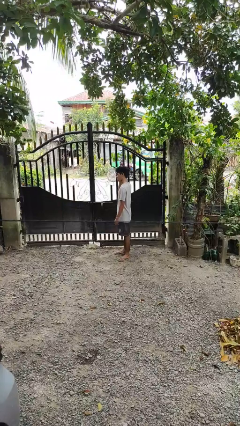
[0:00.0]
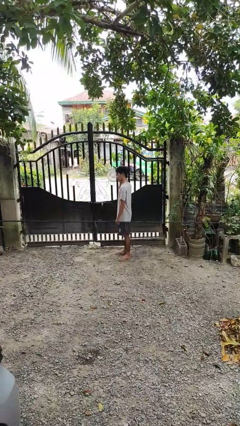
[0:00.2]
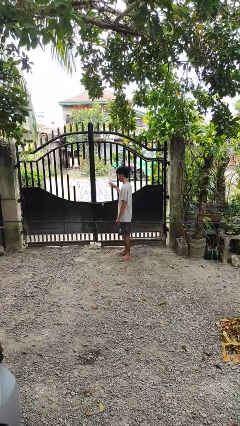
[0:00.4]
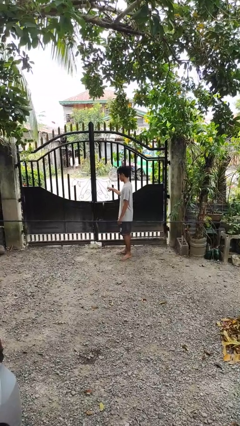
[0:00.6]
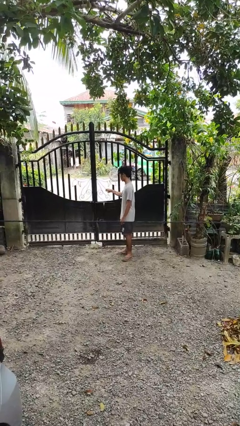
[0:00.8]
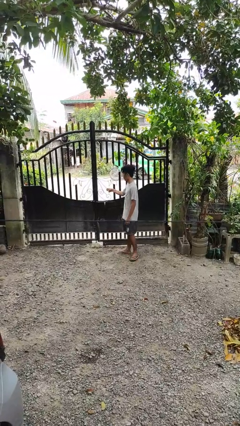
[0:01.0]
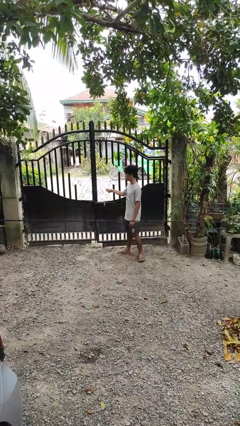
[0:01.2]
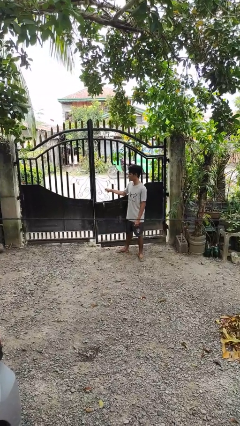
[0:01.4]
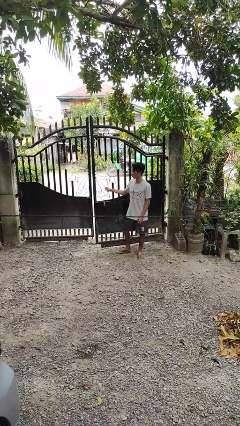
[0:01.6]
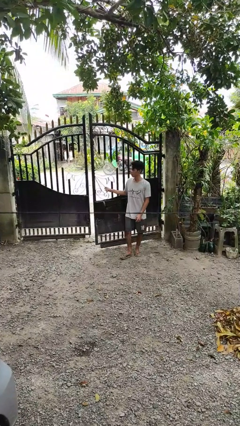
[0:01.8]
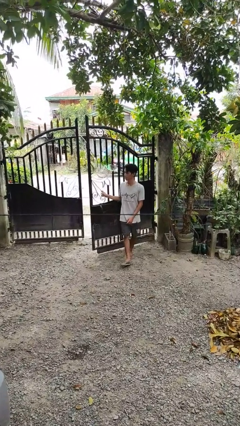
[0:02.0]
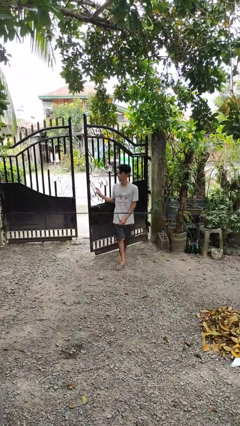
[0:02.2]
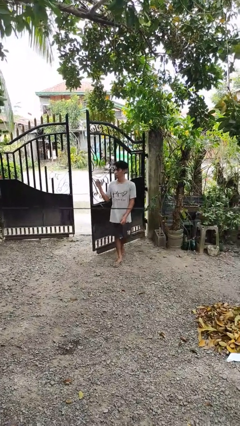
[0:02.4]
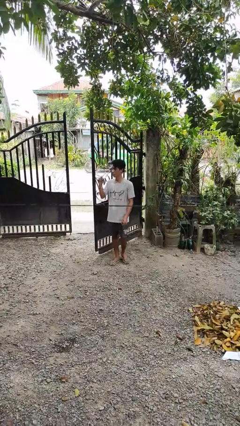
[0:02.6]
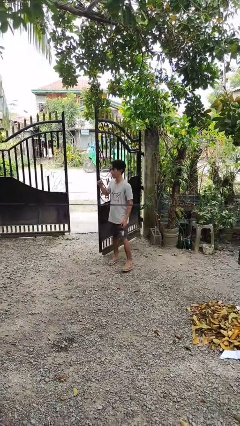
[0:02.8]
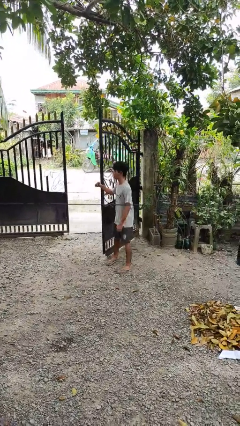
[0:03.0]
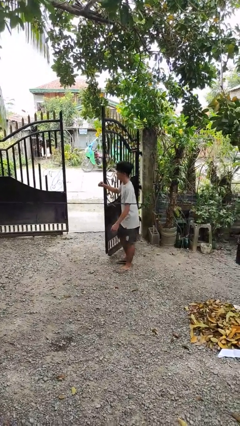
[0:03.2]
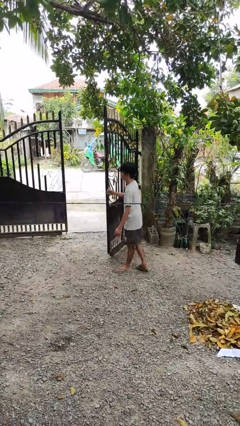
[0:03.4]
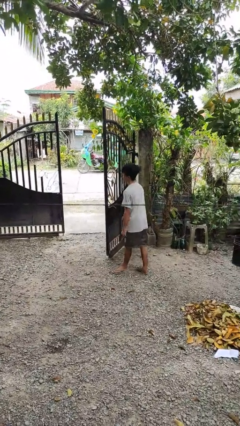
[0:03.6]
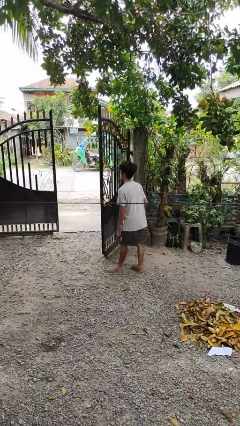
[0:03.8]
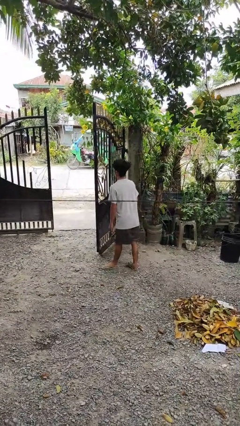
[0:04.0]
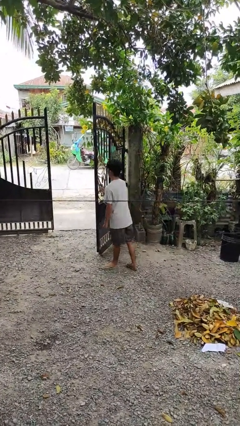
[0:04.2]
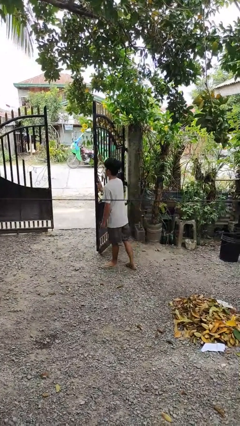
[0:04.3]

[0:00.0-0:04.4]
person opens gate

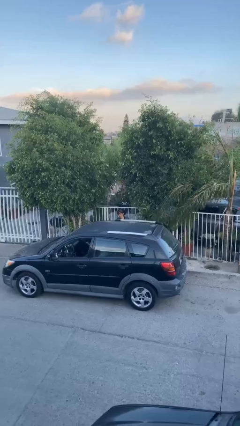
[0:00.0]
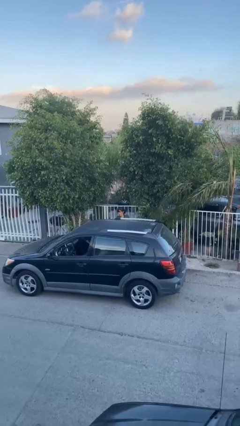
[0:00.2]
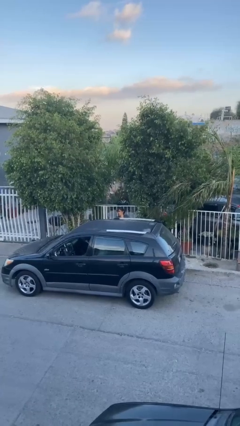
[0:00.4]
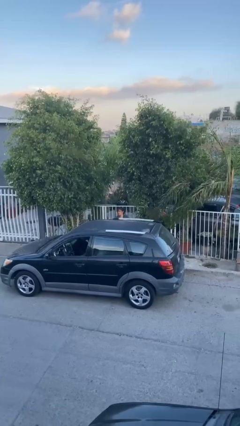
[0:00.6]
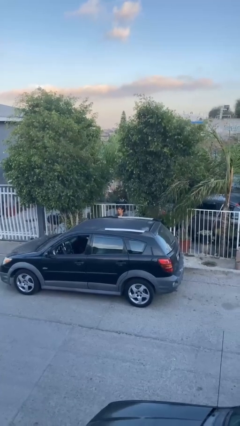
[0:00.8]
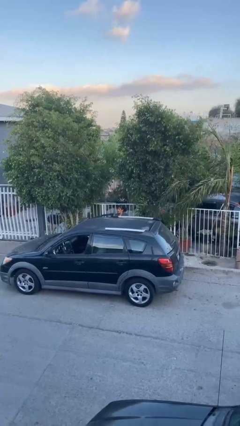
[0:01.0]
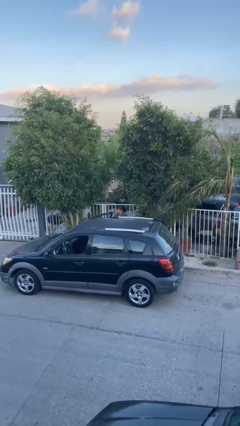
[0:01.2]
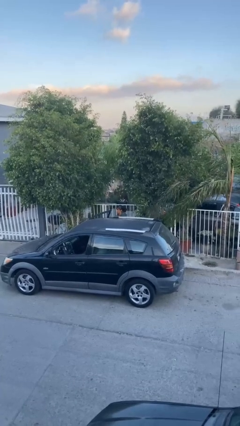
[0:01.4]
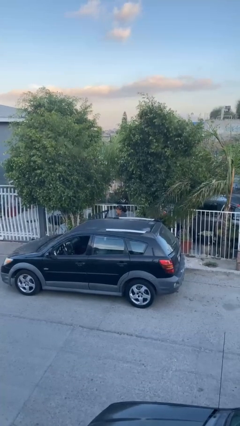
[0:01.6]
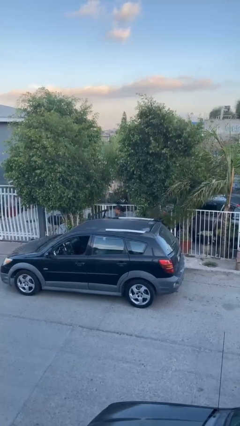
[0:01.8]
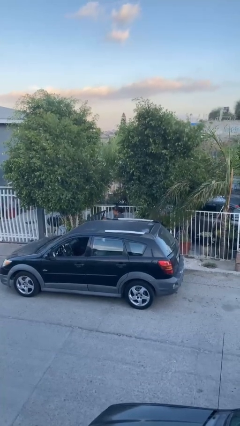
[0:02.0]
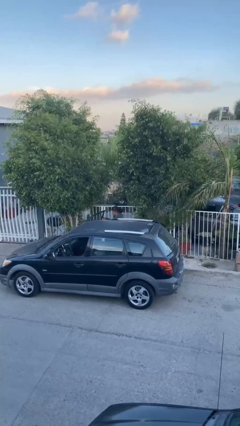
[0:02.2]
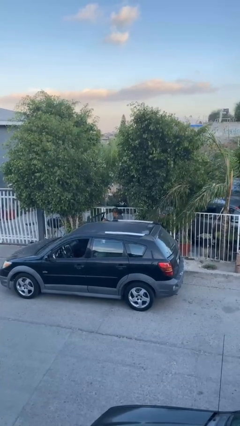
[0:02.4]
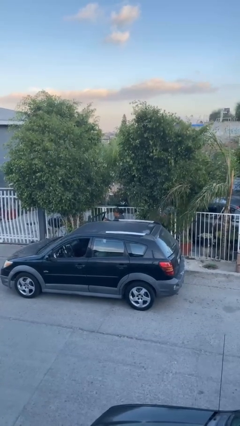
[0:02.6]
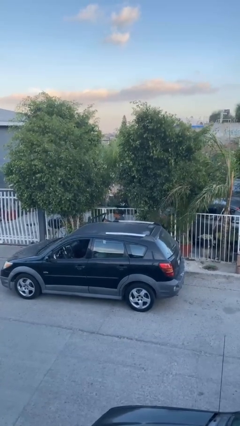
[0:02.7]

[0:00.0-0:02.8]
person opens car door

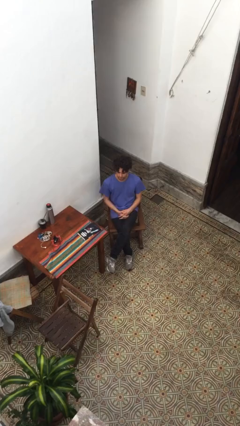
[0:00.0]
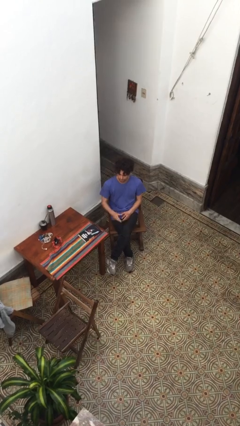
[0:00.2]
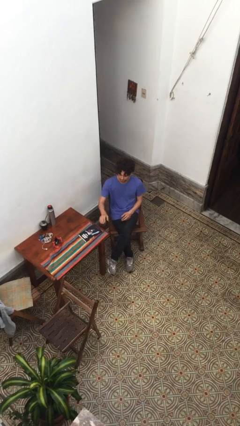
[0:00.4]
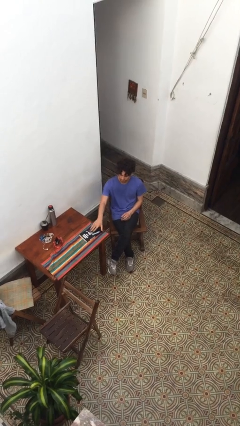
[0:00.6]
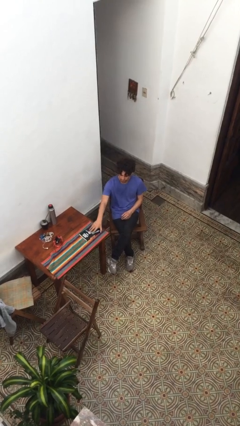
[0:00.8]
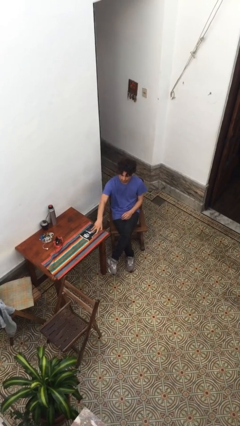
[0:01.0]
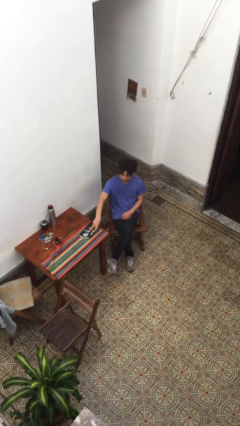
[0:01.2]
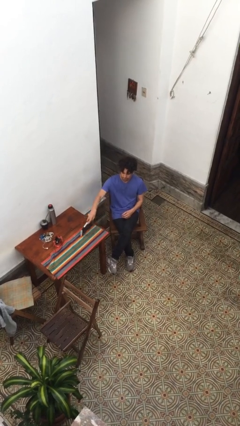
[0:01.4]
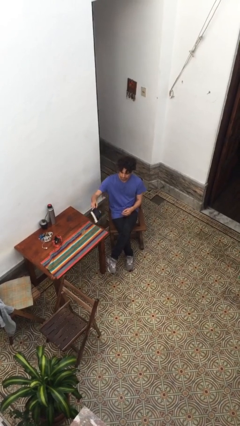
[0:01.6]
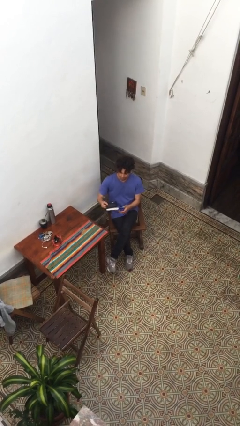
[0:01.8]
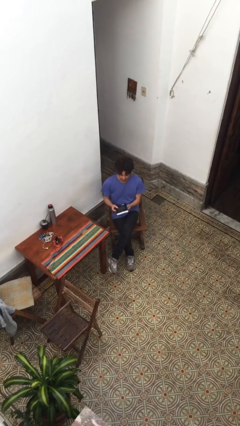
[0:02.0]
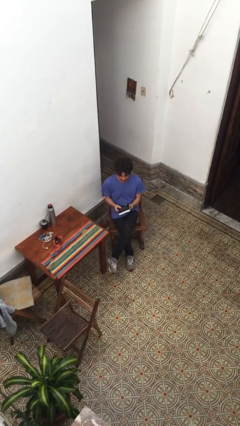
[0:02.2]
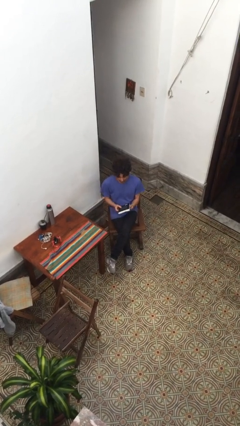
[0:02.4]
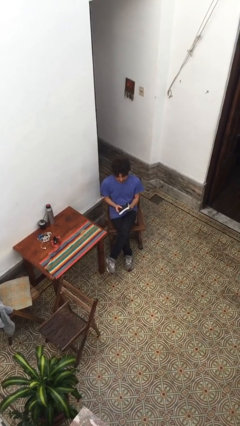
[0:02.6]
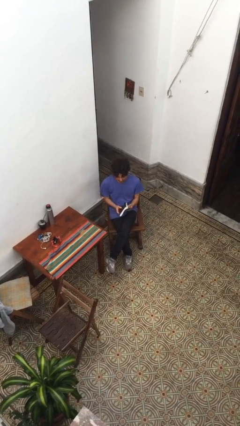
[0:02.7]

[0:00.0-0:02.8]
person picks up object from table

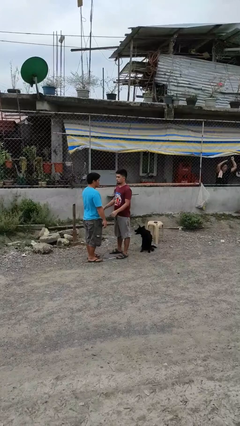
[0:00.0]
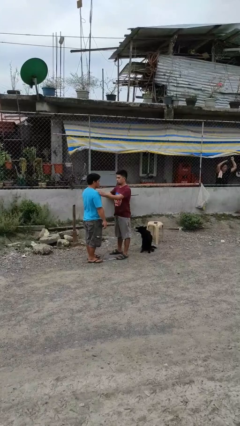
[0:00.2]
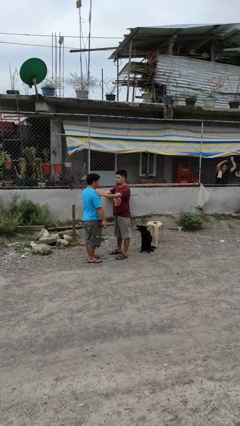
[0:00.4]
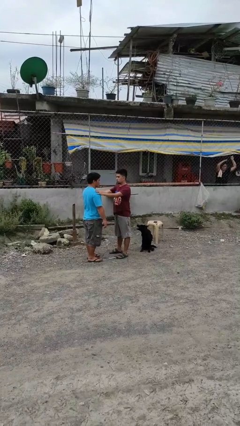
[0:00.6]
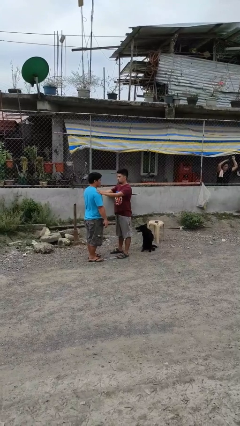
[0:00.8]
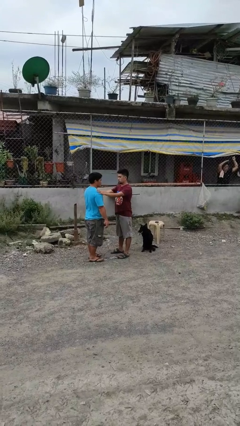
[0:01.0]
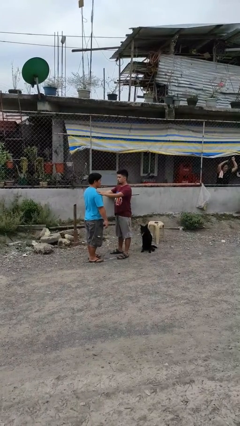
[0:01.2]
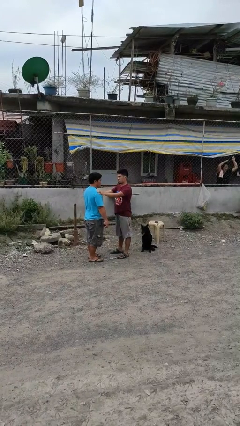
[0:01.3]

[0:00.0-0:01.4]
person grabs person by shoulder

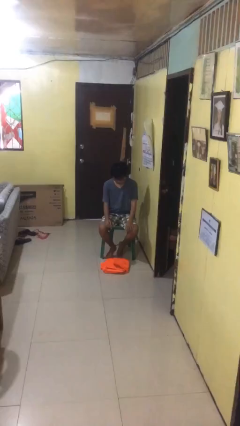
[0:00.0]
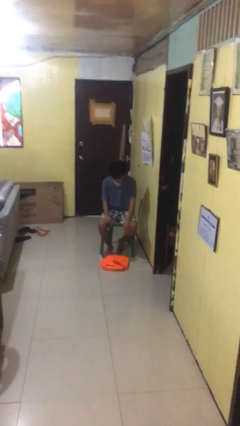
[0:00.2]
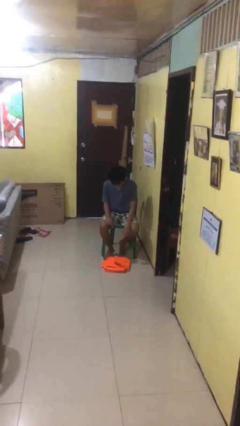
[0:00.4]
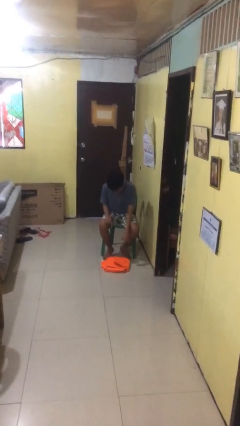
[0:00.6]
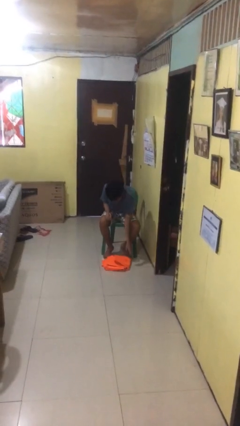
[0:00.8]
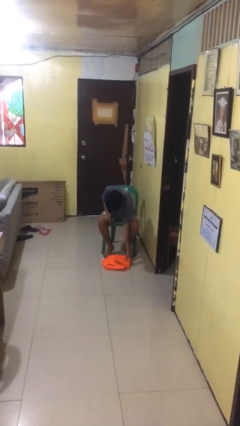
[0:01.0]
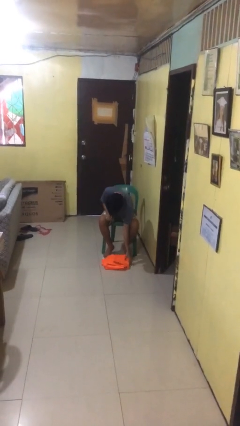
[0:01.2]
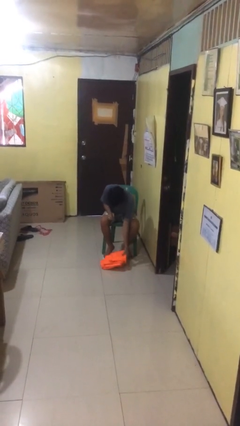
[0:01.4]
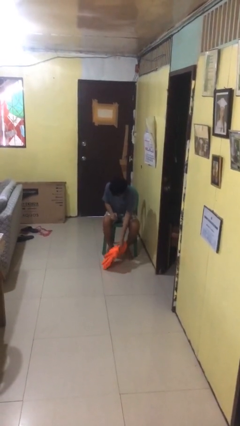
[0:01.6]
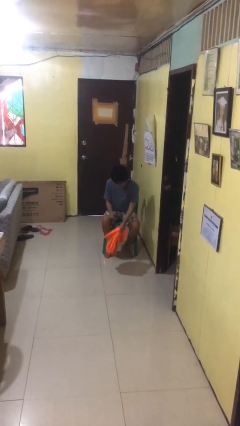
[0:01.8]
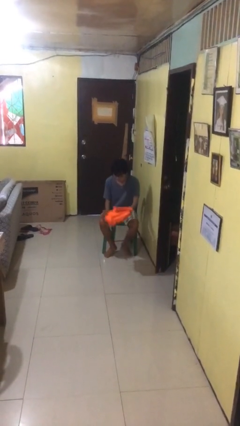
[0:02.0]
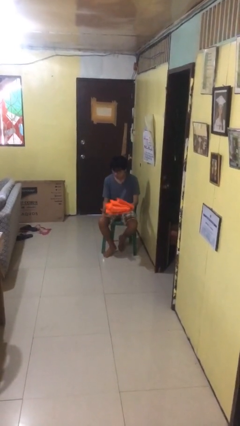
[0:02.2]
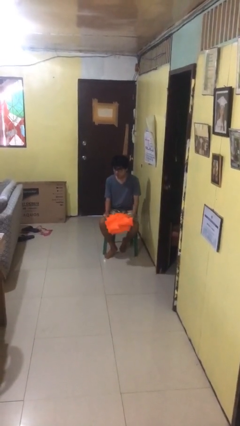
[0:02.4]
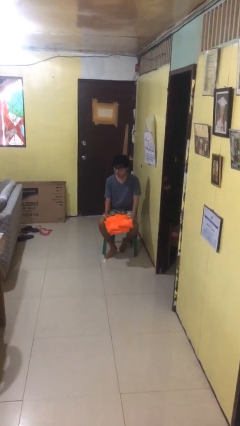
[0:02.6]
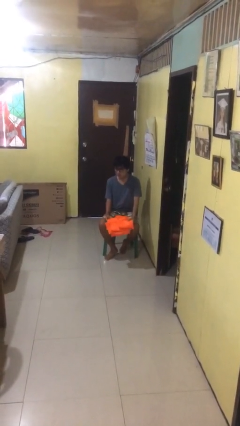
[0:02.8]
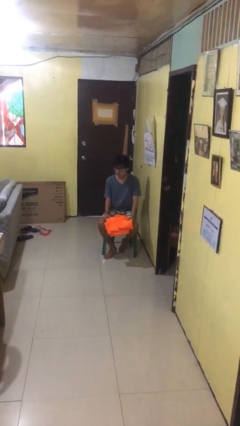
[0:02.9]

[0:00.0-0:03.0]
person picks up object from floor

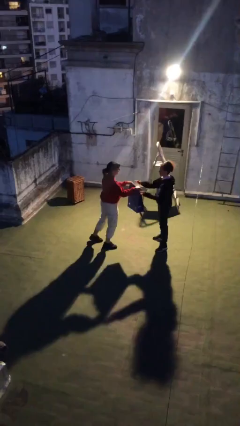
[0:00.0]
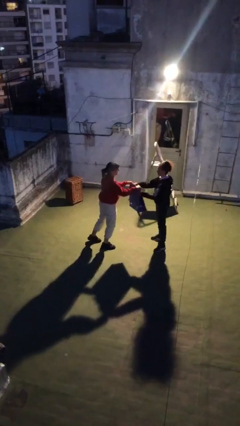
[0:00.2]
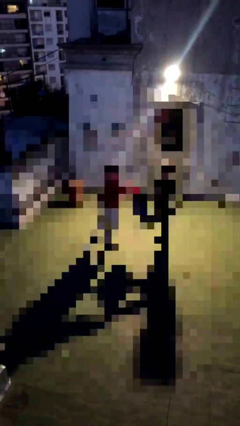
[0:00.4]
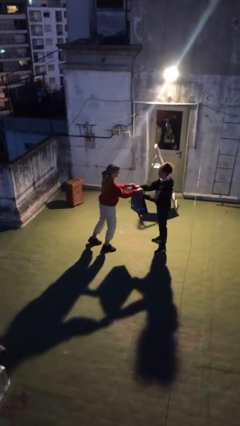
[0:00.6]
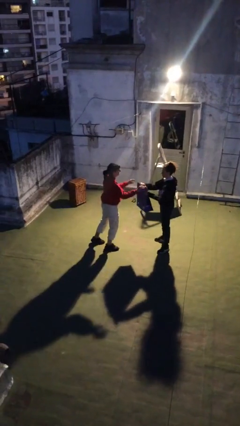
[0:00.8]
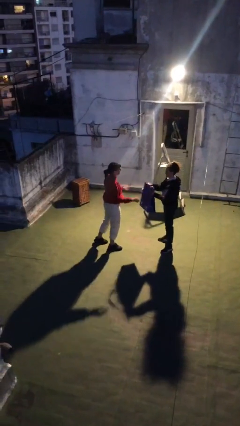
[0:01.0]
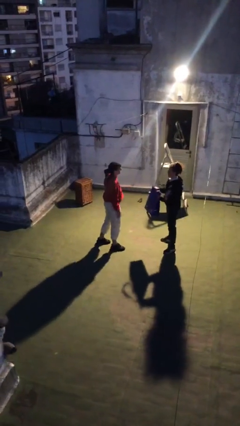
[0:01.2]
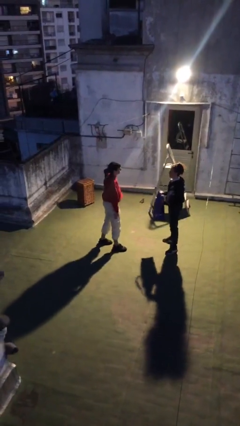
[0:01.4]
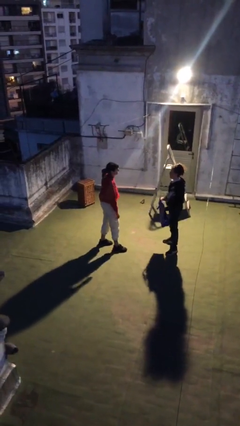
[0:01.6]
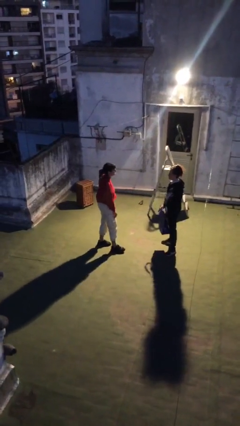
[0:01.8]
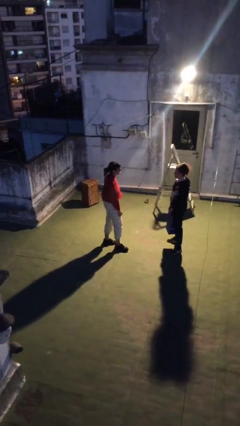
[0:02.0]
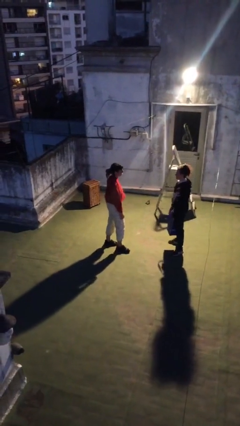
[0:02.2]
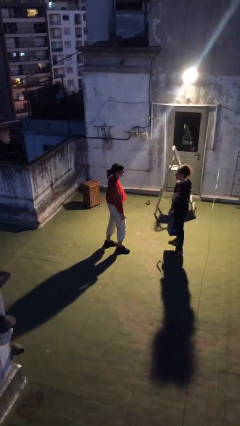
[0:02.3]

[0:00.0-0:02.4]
person transfers object to person
